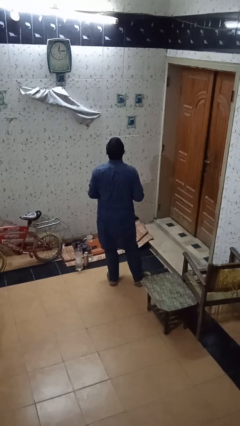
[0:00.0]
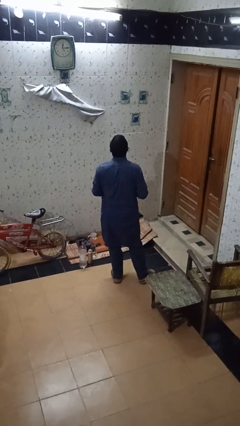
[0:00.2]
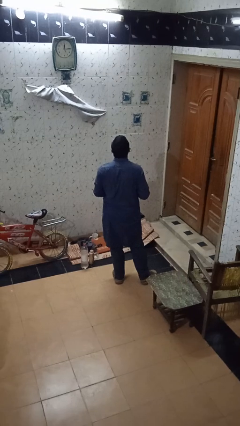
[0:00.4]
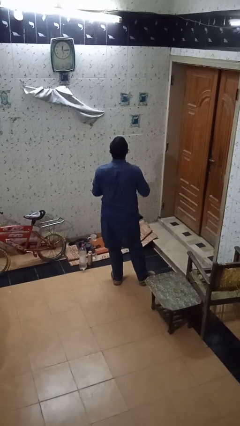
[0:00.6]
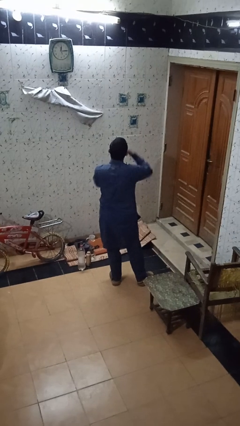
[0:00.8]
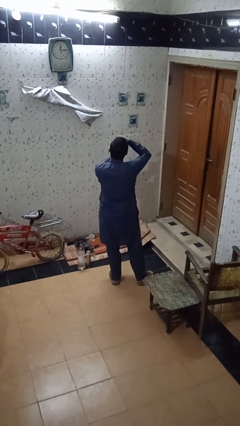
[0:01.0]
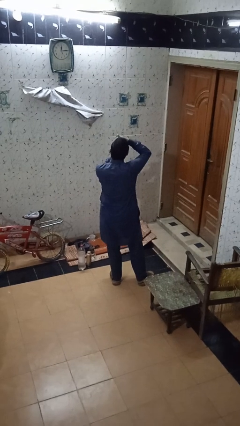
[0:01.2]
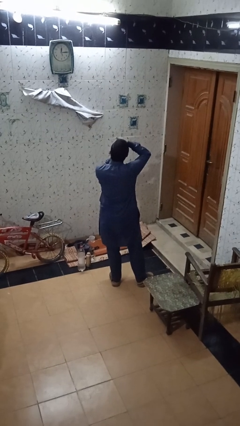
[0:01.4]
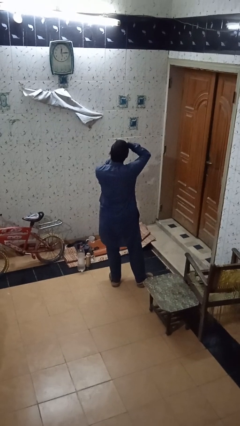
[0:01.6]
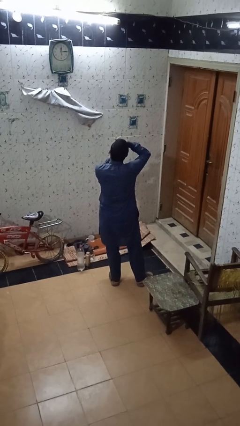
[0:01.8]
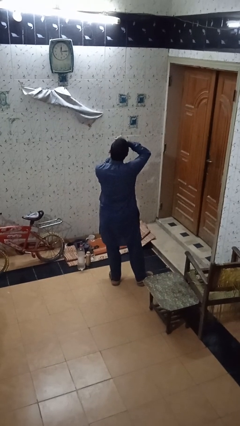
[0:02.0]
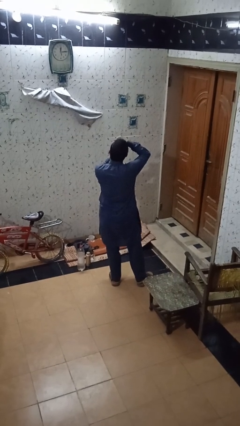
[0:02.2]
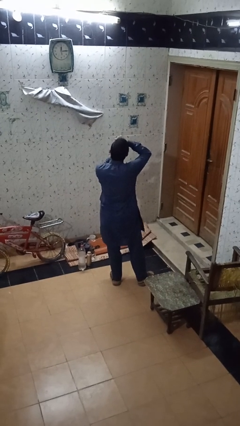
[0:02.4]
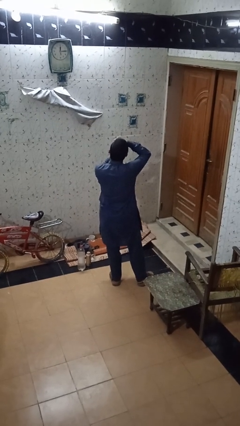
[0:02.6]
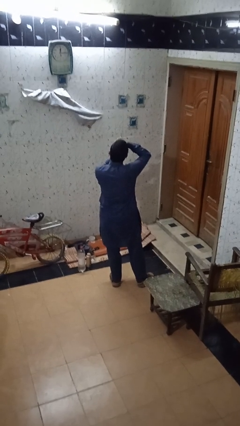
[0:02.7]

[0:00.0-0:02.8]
person flosses

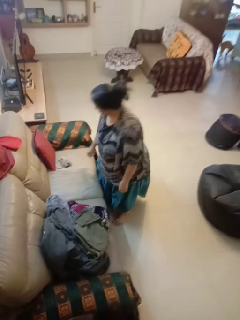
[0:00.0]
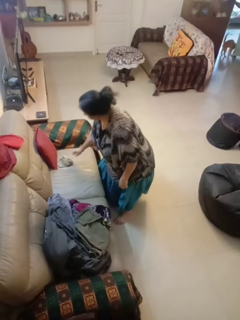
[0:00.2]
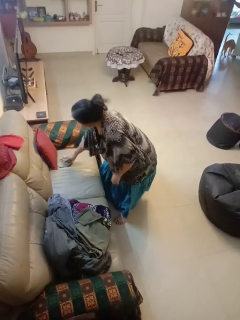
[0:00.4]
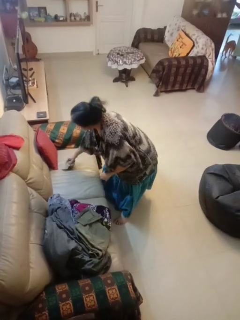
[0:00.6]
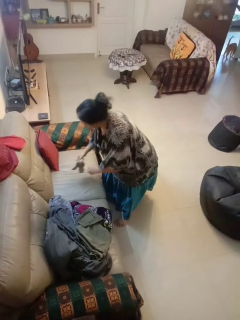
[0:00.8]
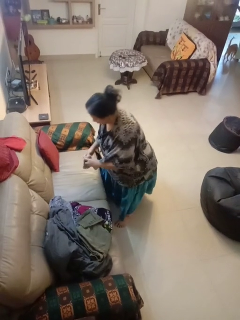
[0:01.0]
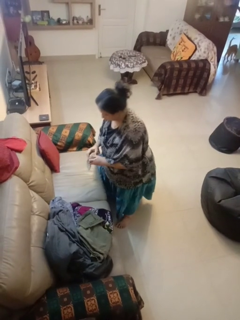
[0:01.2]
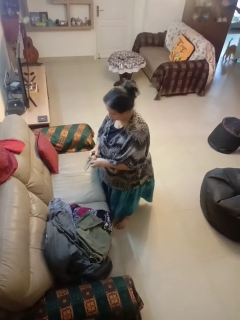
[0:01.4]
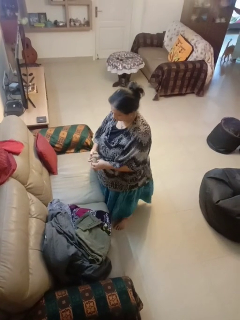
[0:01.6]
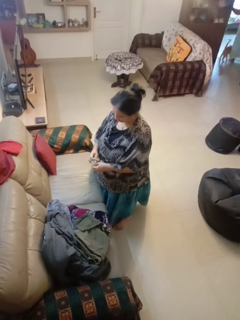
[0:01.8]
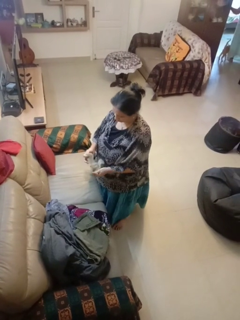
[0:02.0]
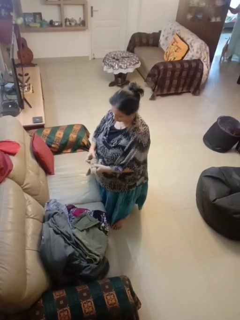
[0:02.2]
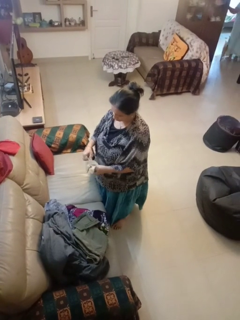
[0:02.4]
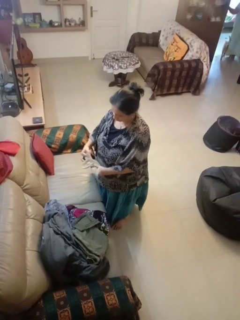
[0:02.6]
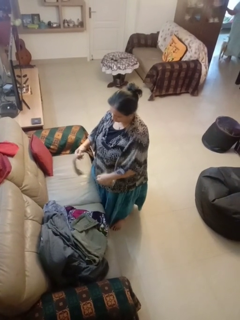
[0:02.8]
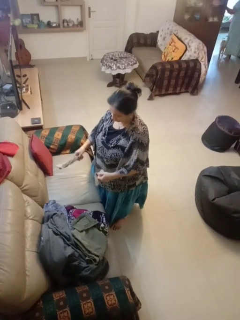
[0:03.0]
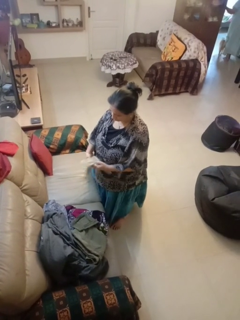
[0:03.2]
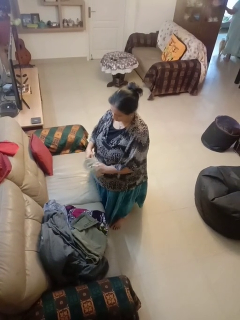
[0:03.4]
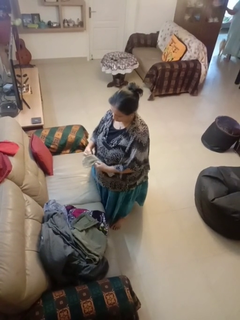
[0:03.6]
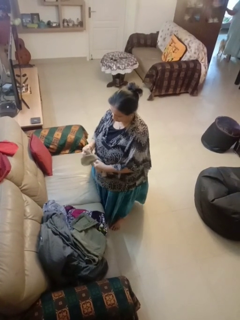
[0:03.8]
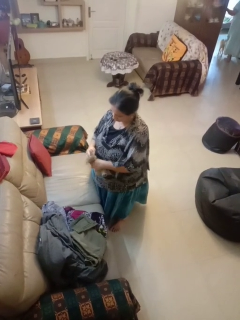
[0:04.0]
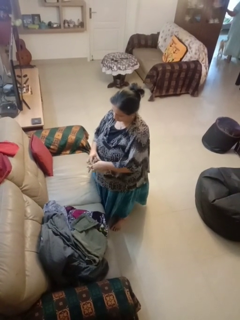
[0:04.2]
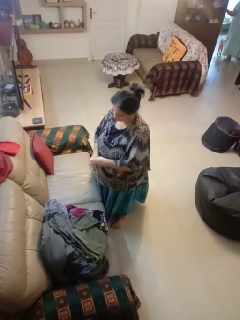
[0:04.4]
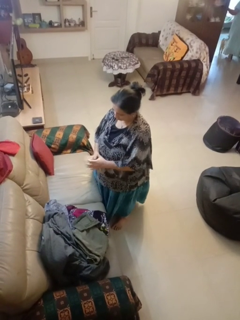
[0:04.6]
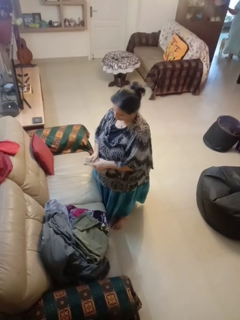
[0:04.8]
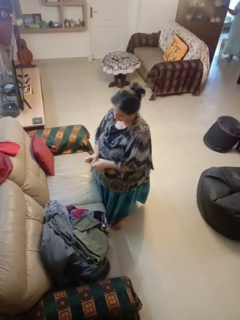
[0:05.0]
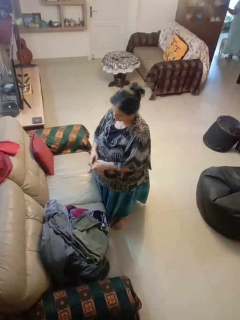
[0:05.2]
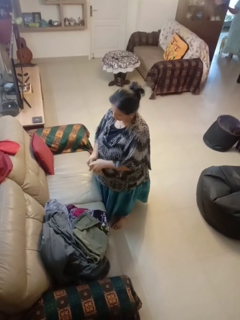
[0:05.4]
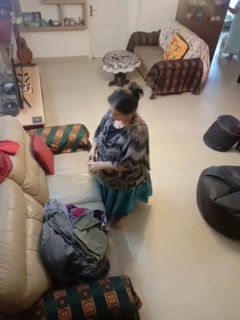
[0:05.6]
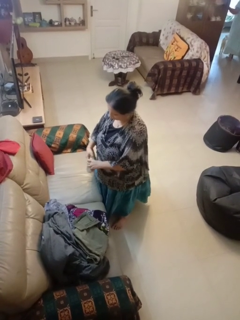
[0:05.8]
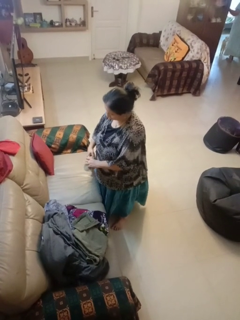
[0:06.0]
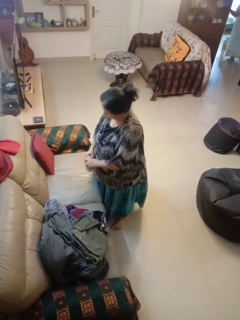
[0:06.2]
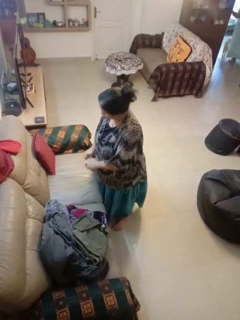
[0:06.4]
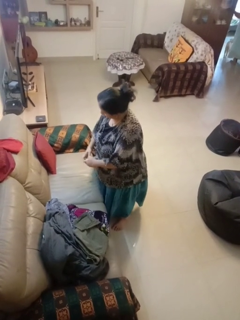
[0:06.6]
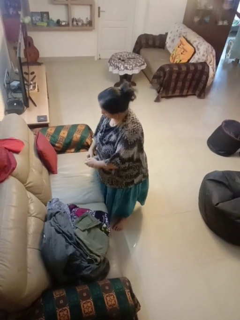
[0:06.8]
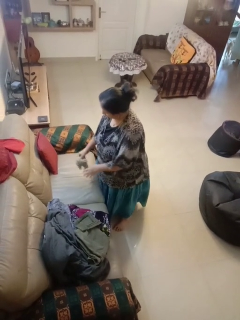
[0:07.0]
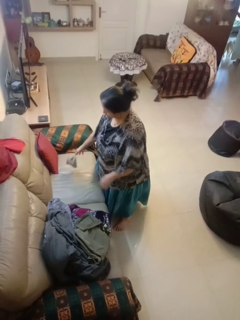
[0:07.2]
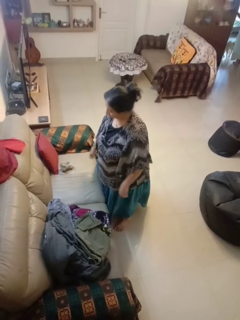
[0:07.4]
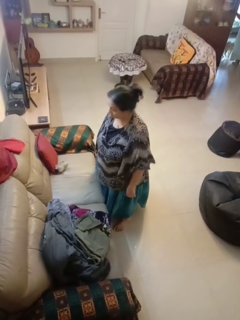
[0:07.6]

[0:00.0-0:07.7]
person folds socks

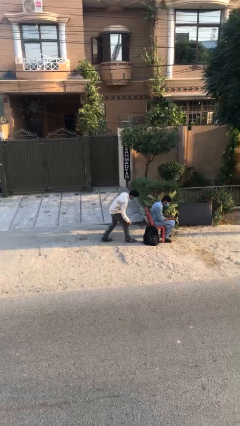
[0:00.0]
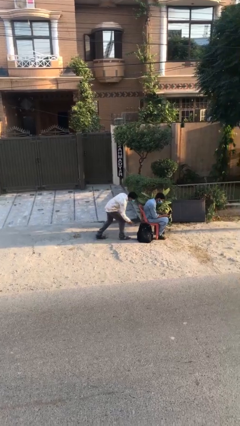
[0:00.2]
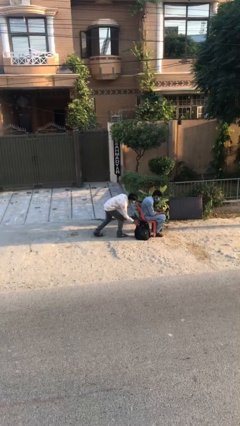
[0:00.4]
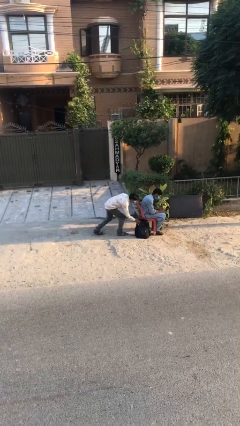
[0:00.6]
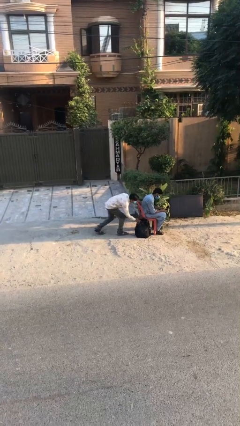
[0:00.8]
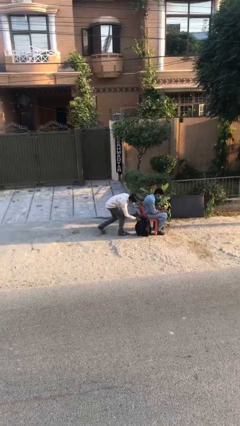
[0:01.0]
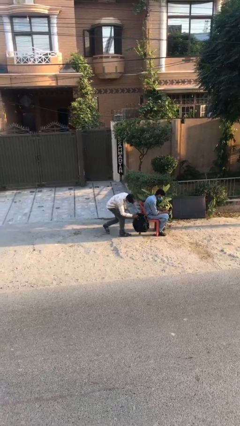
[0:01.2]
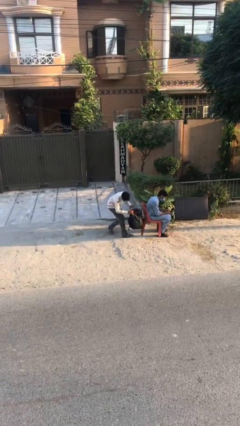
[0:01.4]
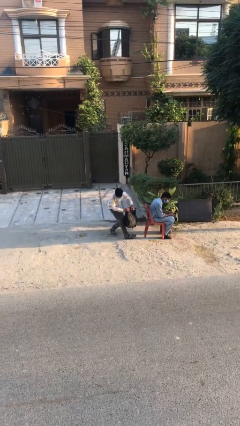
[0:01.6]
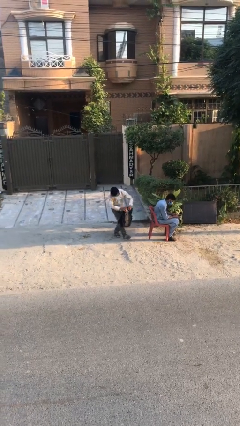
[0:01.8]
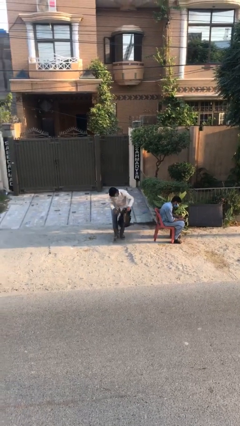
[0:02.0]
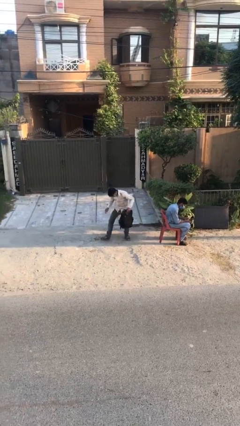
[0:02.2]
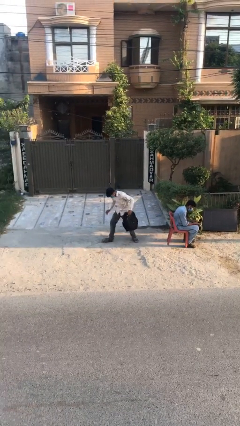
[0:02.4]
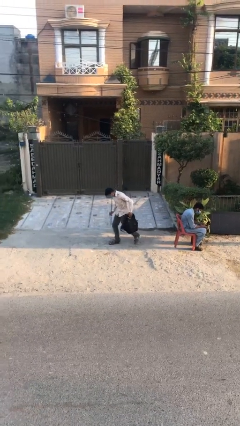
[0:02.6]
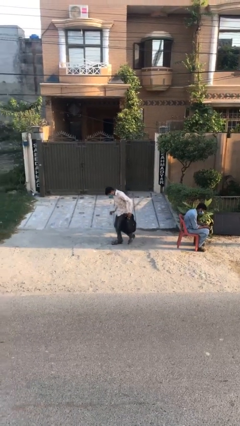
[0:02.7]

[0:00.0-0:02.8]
person steals object from person

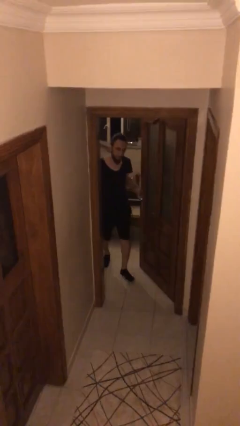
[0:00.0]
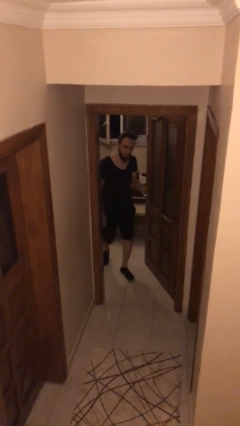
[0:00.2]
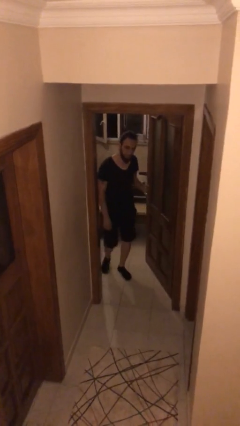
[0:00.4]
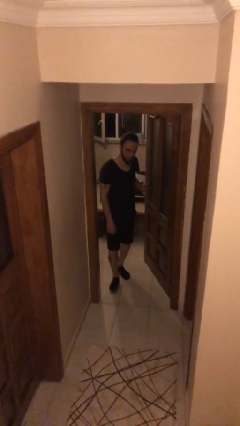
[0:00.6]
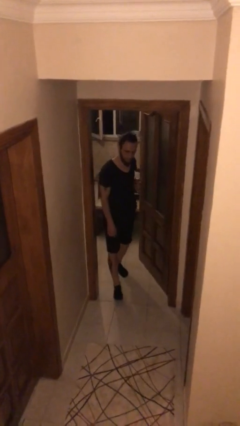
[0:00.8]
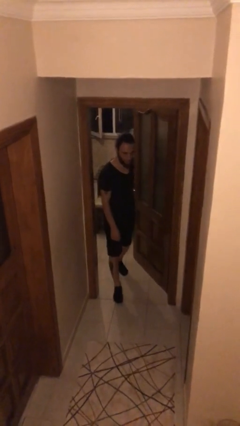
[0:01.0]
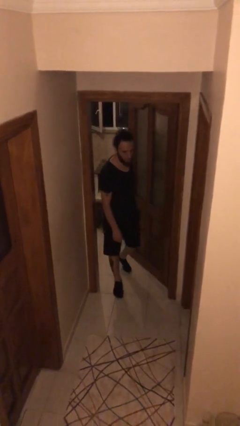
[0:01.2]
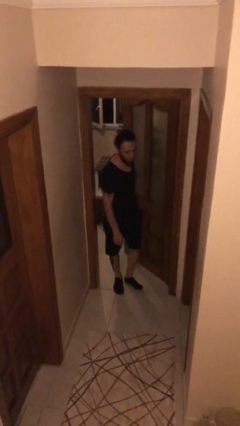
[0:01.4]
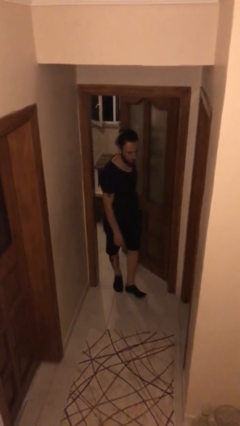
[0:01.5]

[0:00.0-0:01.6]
person enters scene through structure

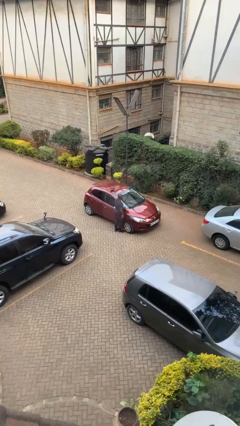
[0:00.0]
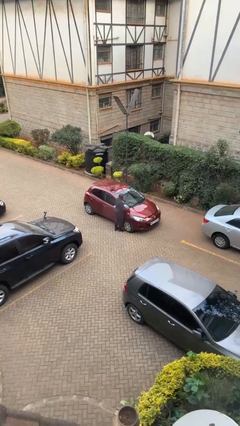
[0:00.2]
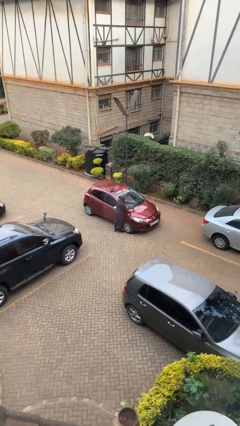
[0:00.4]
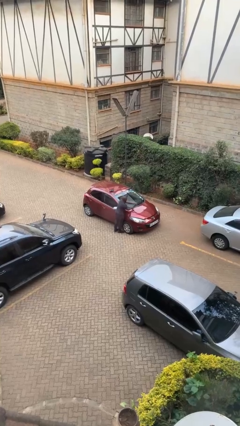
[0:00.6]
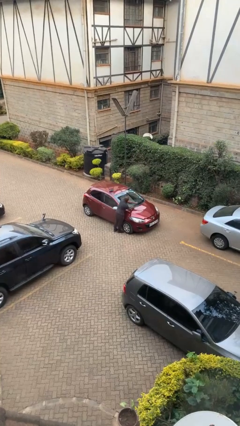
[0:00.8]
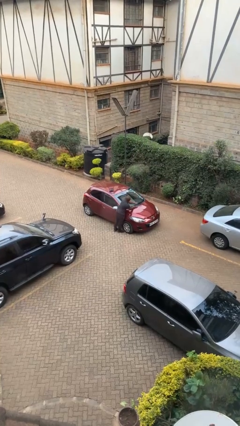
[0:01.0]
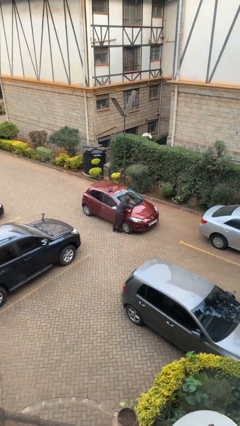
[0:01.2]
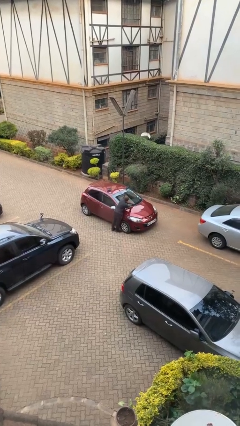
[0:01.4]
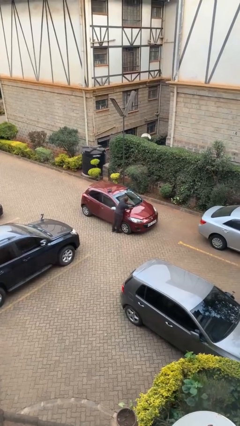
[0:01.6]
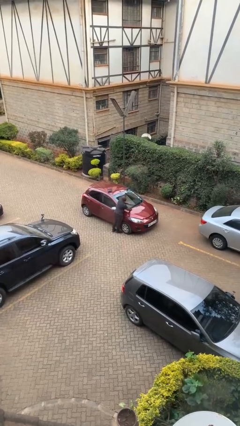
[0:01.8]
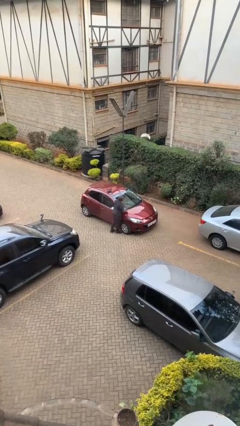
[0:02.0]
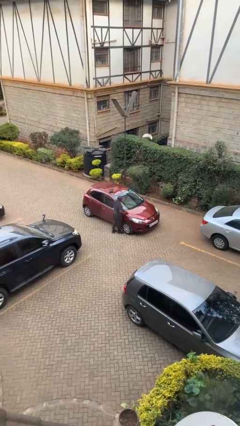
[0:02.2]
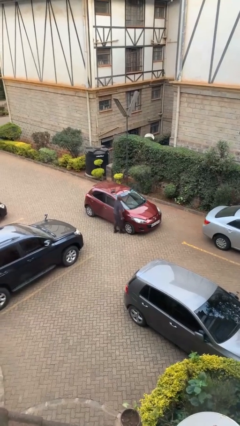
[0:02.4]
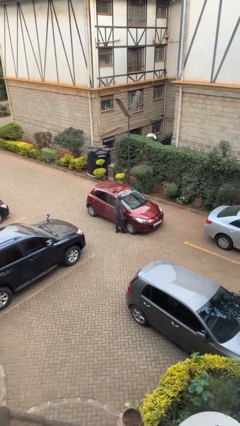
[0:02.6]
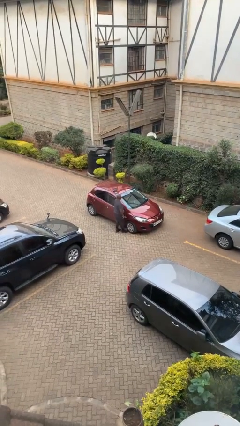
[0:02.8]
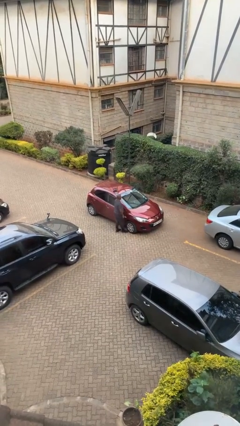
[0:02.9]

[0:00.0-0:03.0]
person flips down car wipers

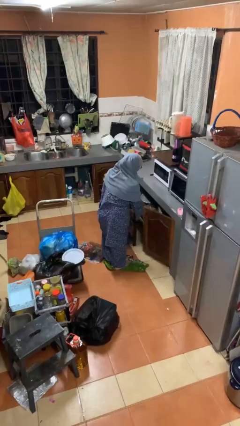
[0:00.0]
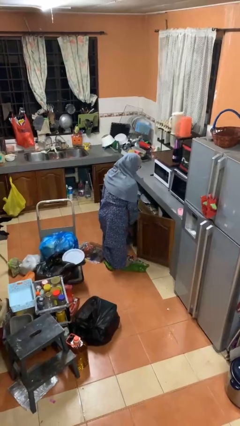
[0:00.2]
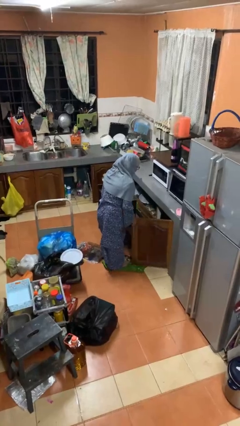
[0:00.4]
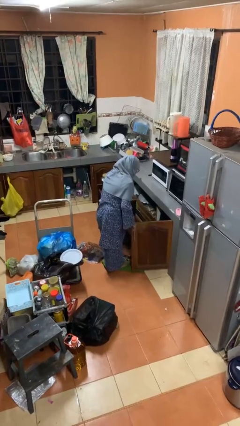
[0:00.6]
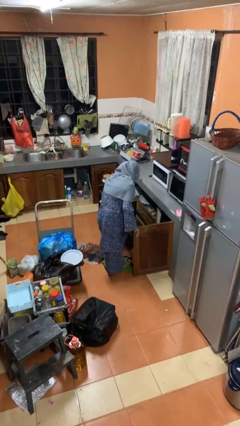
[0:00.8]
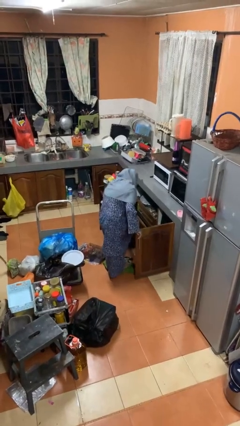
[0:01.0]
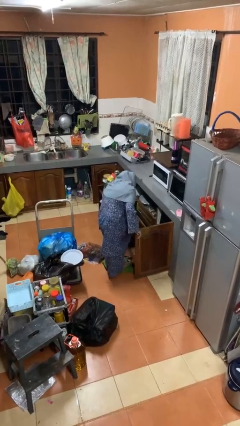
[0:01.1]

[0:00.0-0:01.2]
person opens cabinet

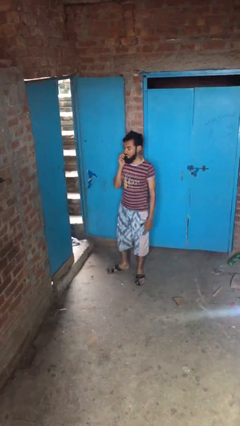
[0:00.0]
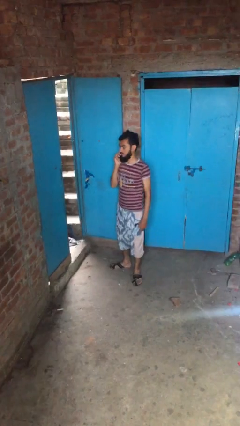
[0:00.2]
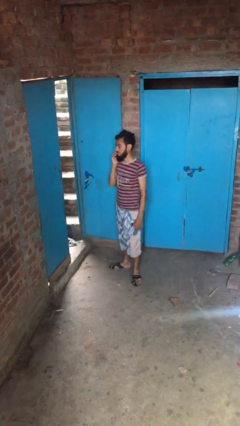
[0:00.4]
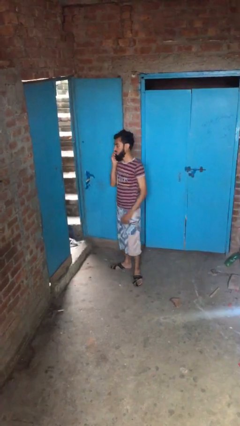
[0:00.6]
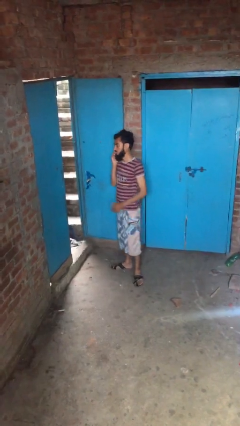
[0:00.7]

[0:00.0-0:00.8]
person closes facility door
